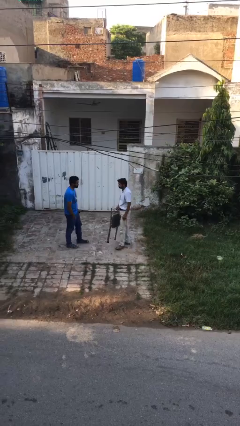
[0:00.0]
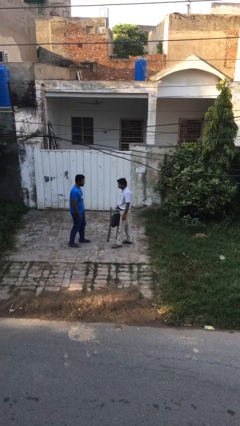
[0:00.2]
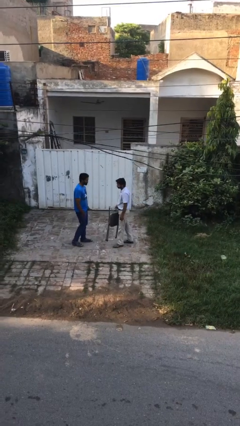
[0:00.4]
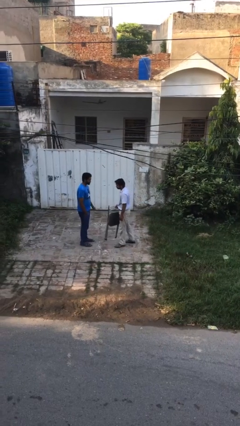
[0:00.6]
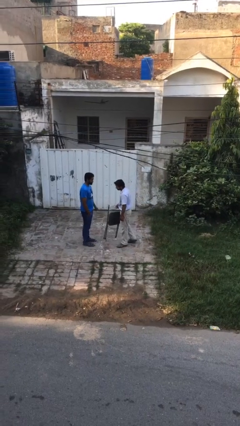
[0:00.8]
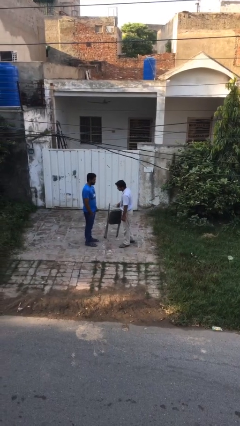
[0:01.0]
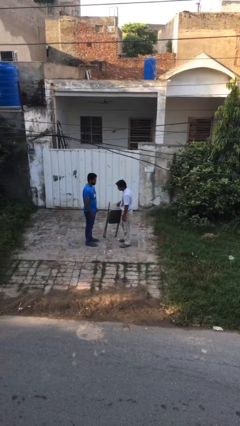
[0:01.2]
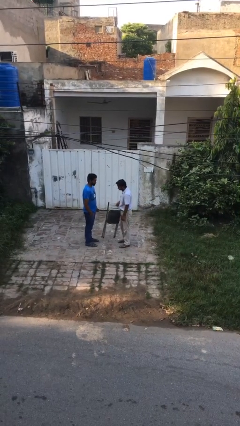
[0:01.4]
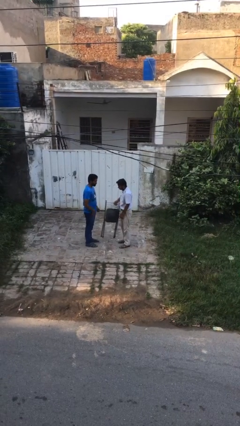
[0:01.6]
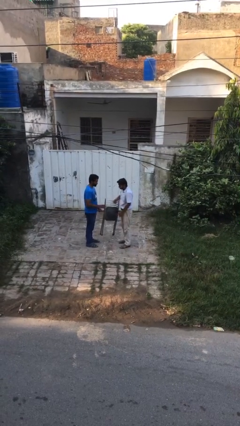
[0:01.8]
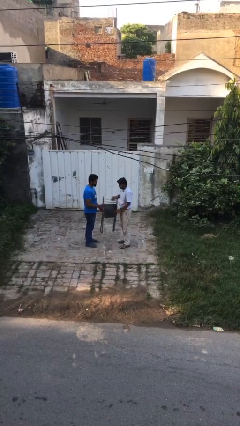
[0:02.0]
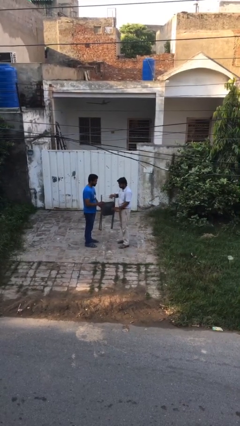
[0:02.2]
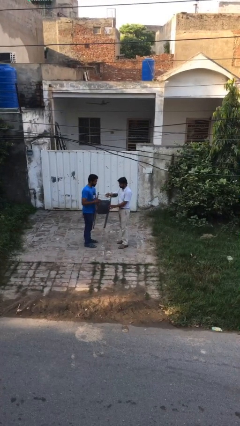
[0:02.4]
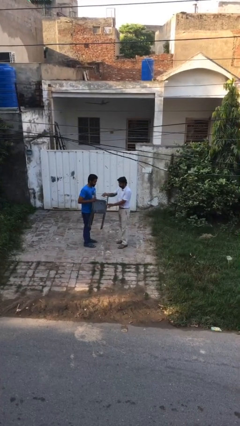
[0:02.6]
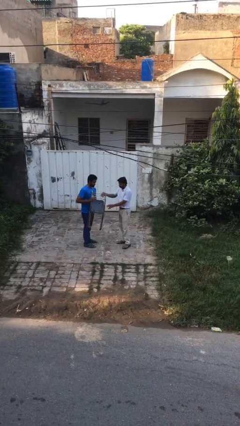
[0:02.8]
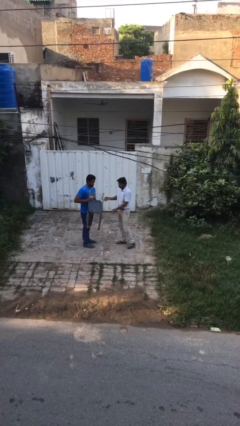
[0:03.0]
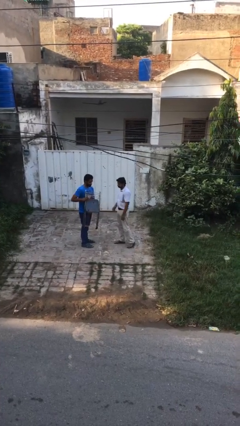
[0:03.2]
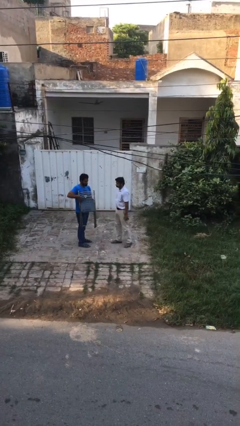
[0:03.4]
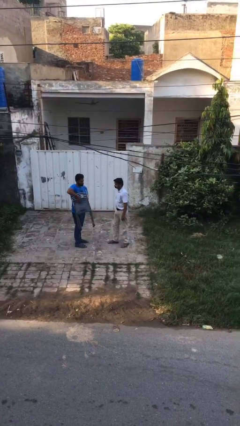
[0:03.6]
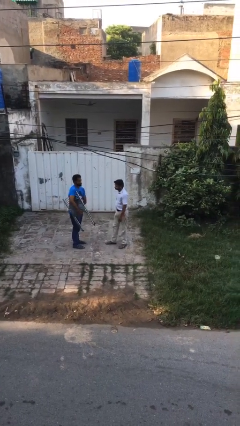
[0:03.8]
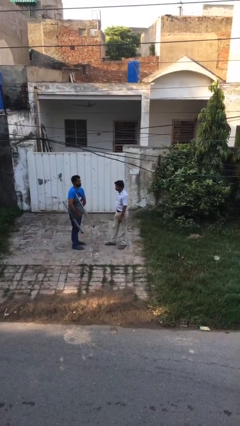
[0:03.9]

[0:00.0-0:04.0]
person transfers object to person

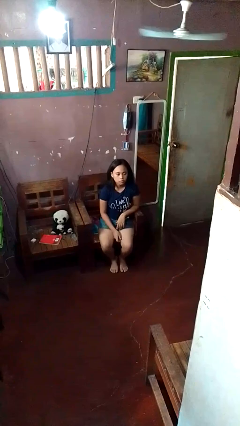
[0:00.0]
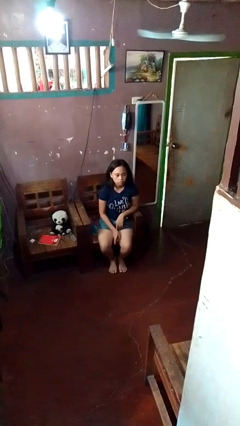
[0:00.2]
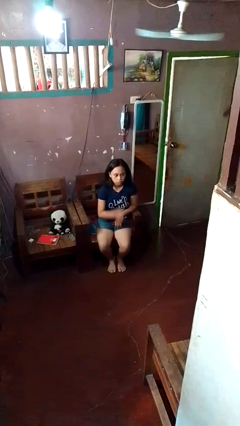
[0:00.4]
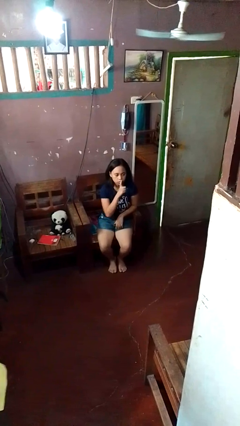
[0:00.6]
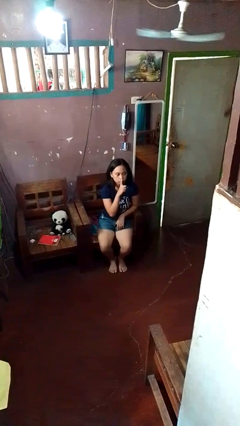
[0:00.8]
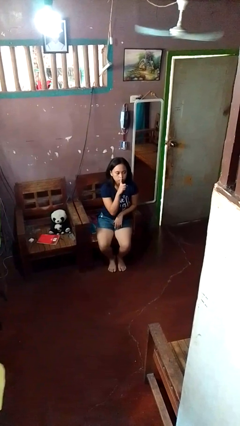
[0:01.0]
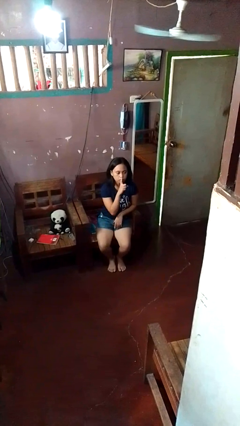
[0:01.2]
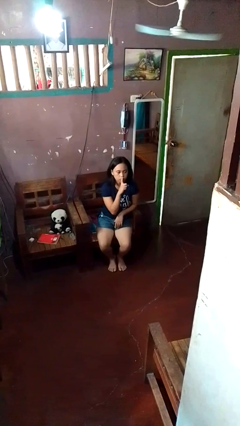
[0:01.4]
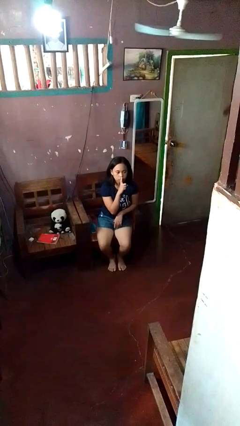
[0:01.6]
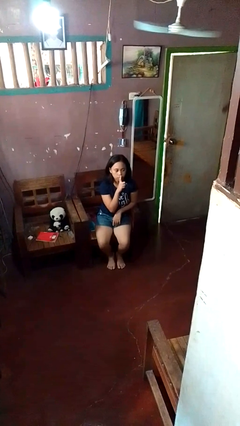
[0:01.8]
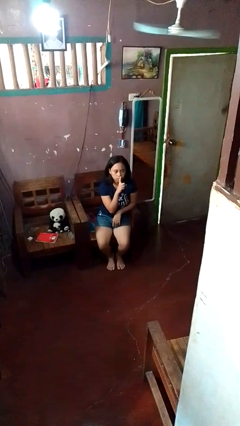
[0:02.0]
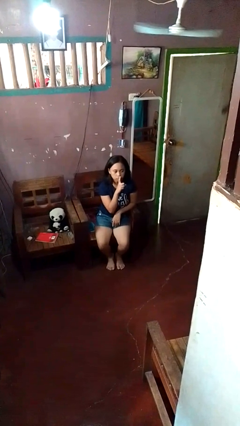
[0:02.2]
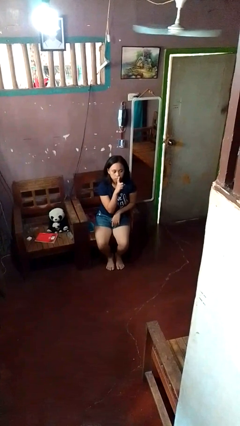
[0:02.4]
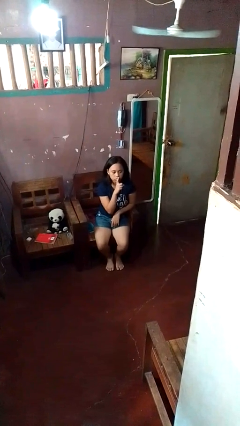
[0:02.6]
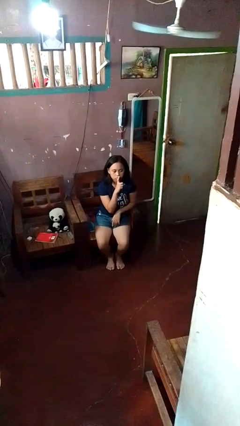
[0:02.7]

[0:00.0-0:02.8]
person gestures be quiet

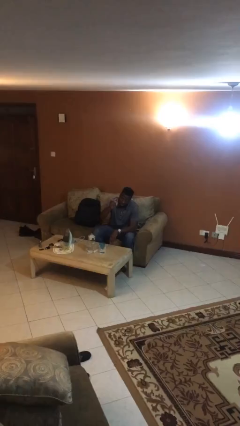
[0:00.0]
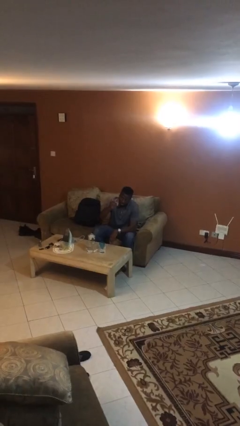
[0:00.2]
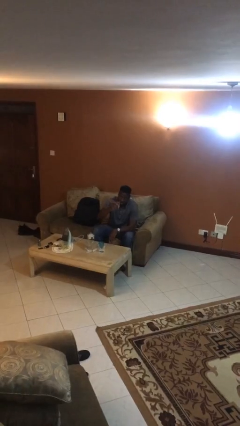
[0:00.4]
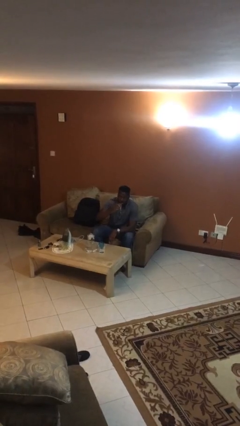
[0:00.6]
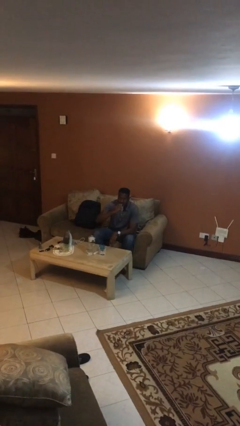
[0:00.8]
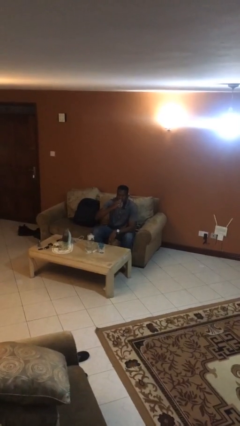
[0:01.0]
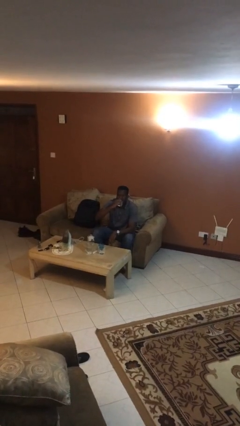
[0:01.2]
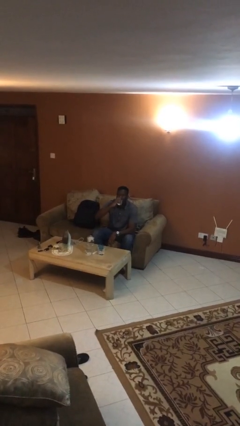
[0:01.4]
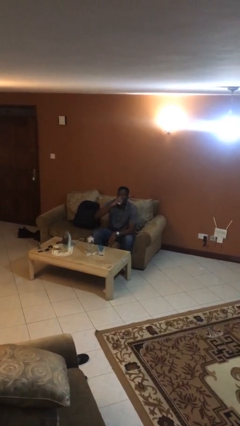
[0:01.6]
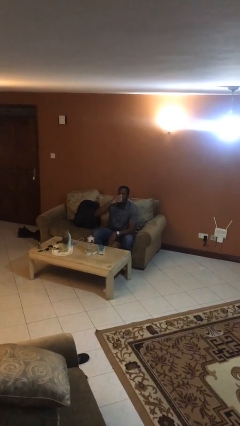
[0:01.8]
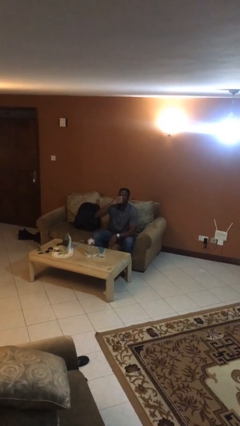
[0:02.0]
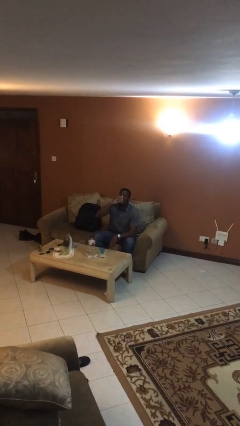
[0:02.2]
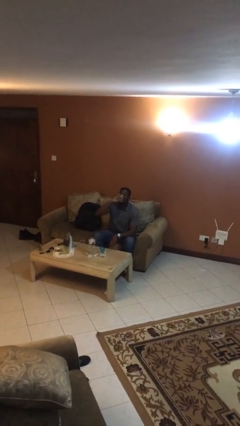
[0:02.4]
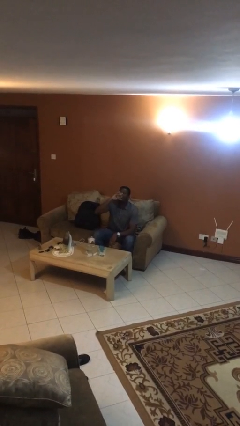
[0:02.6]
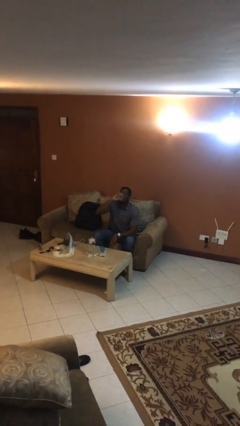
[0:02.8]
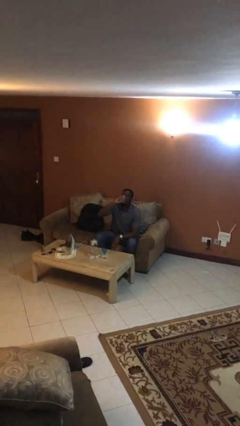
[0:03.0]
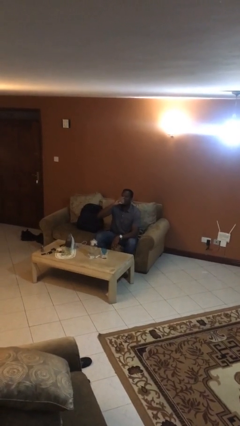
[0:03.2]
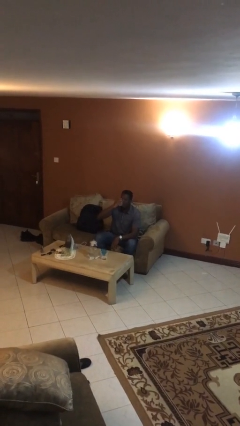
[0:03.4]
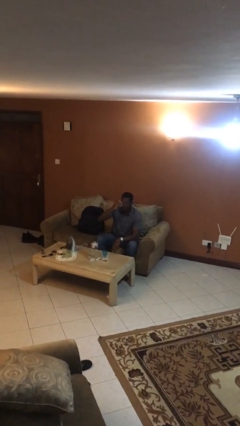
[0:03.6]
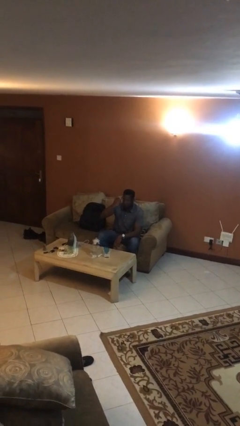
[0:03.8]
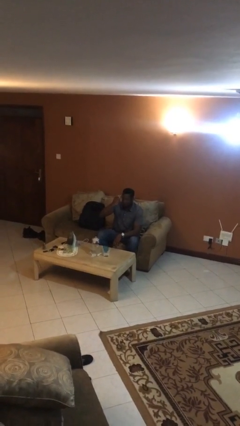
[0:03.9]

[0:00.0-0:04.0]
person drinks from shotglass

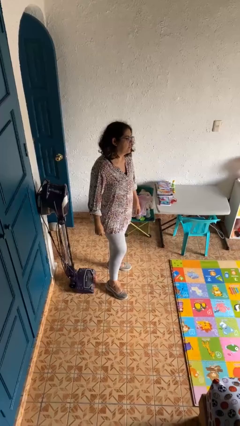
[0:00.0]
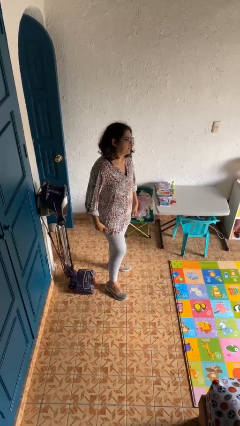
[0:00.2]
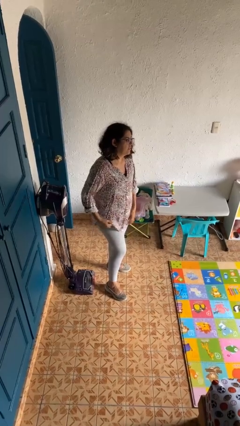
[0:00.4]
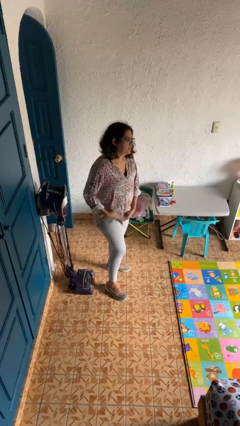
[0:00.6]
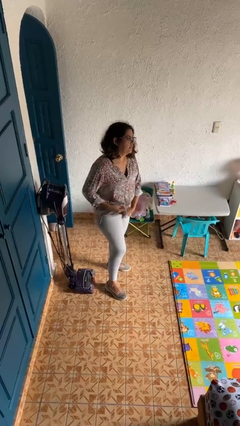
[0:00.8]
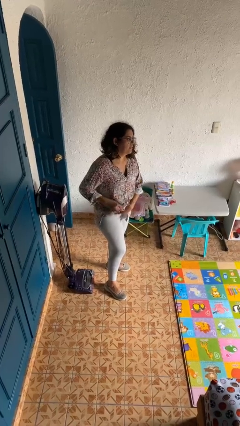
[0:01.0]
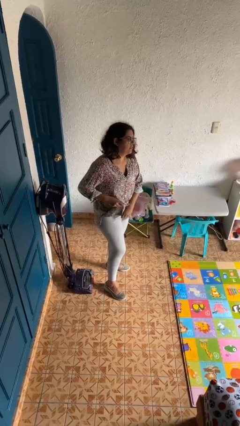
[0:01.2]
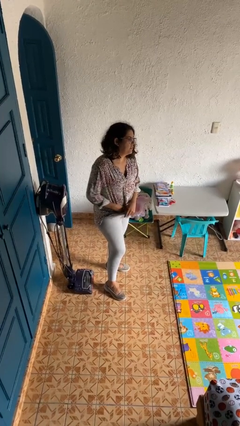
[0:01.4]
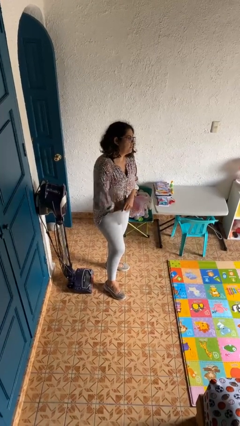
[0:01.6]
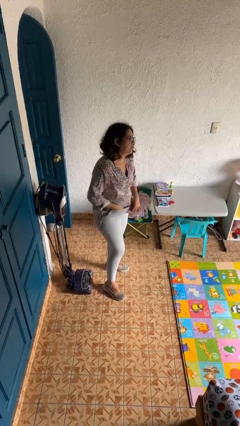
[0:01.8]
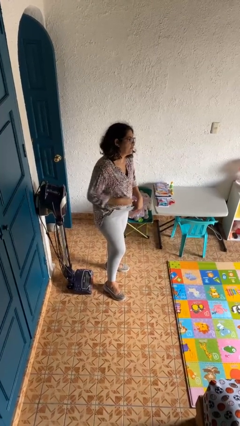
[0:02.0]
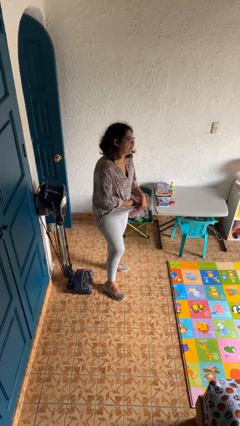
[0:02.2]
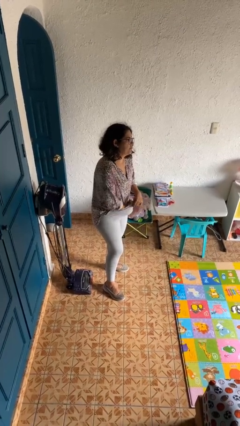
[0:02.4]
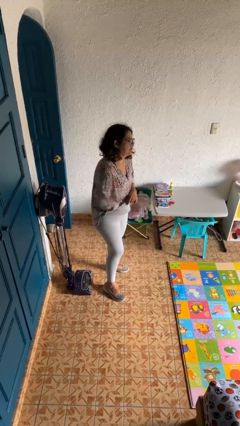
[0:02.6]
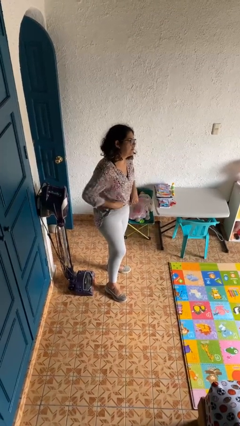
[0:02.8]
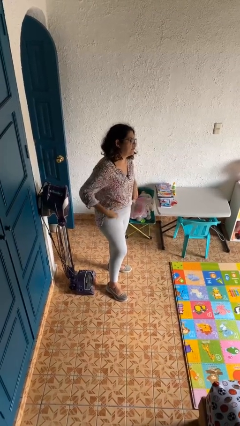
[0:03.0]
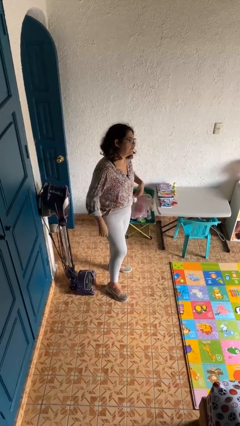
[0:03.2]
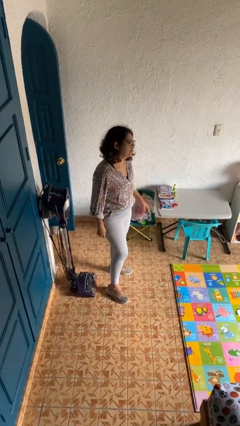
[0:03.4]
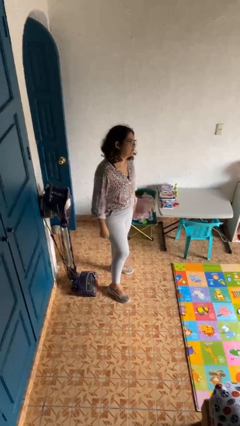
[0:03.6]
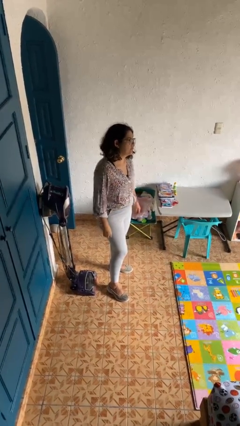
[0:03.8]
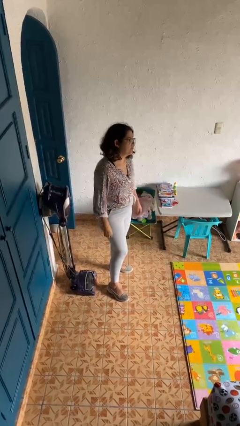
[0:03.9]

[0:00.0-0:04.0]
person tucks in shirt

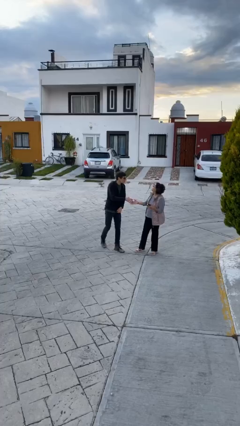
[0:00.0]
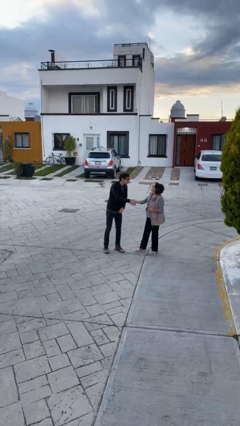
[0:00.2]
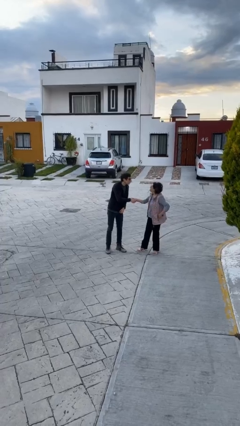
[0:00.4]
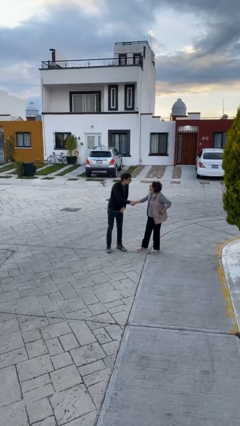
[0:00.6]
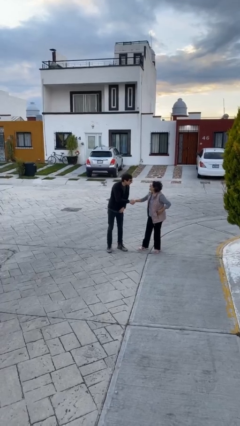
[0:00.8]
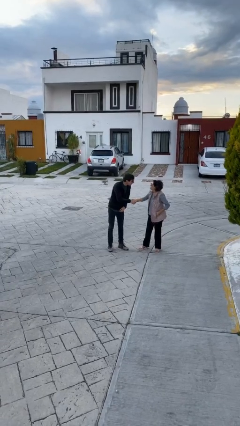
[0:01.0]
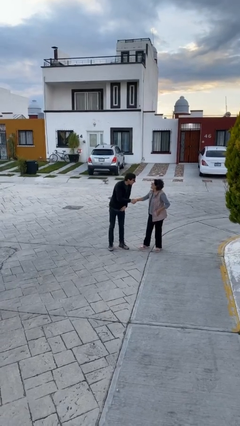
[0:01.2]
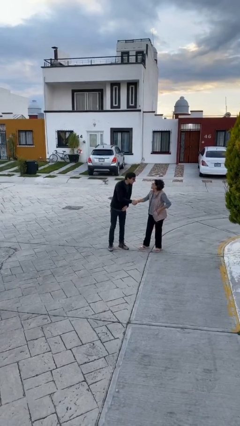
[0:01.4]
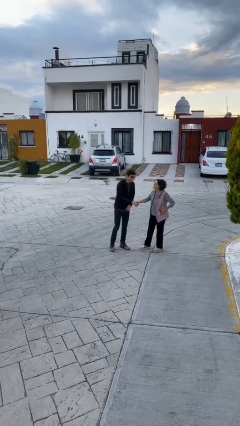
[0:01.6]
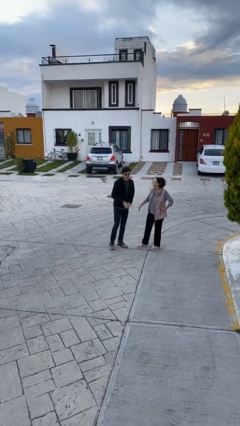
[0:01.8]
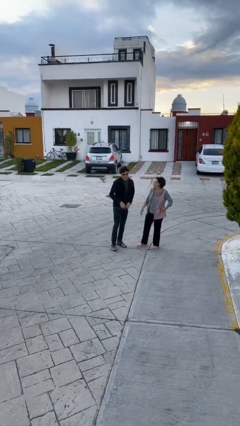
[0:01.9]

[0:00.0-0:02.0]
person shakes hand

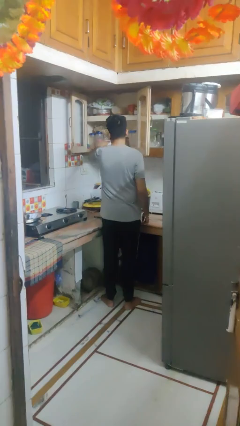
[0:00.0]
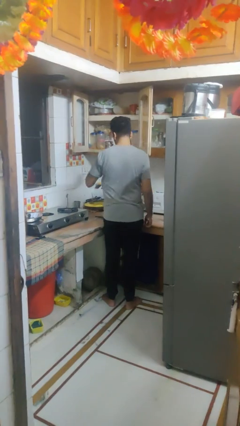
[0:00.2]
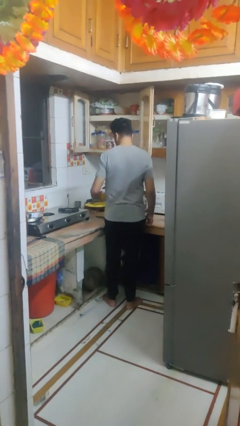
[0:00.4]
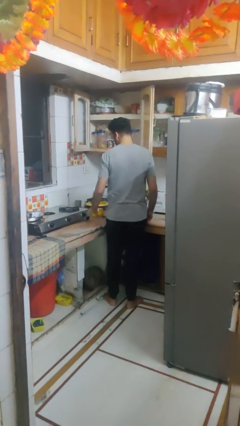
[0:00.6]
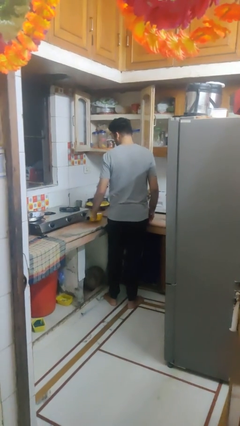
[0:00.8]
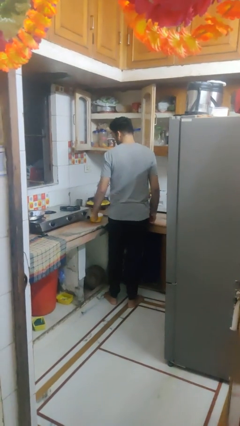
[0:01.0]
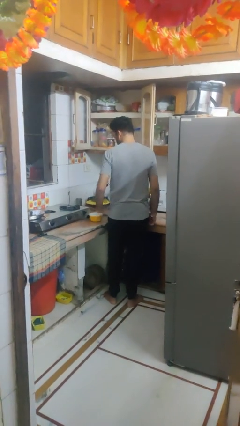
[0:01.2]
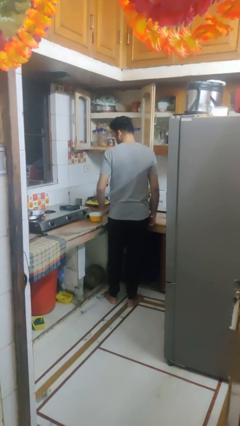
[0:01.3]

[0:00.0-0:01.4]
person takes object from cabinet
